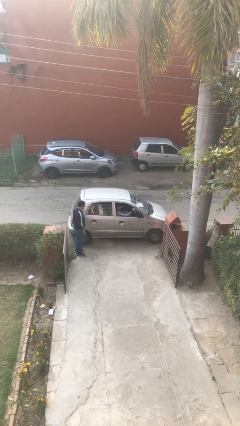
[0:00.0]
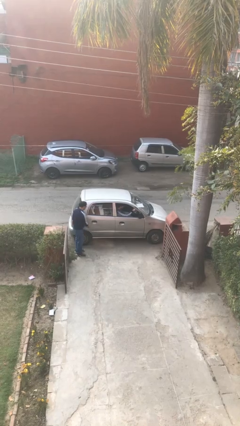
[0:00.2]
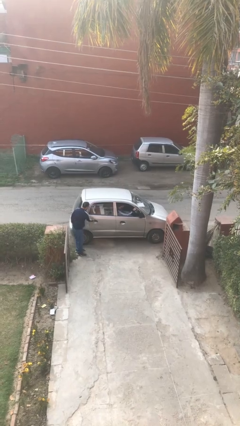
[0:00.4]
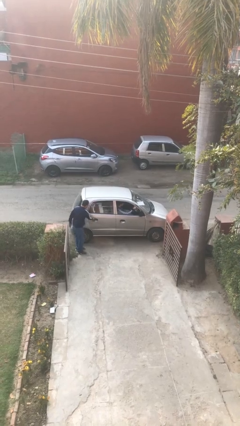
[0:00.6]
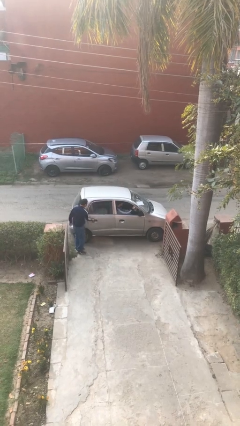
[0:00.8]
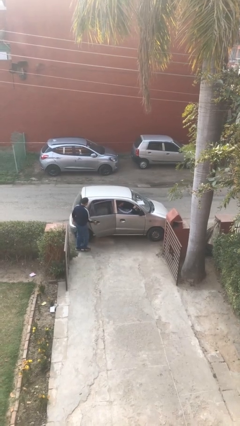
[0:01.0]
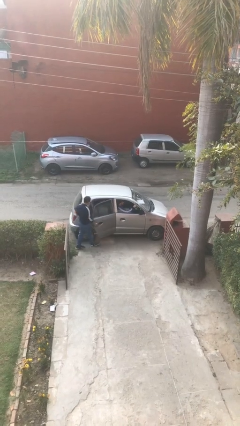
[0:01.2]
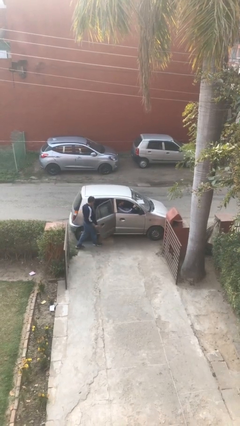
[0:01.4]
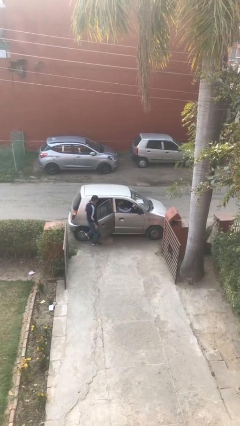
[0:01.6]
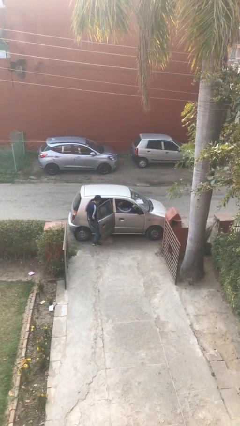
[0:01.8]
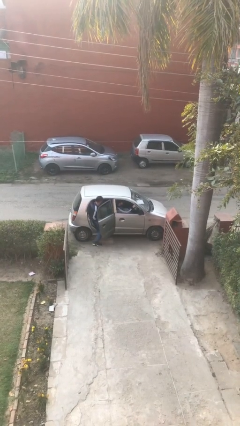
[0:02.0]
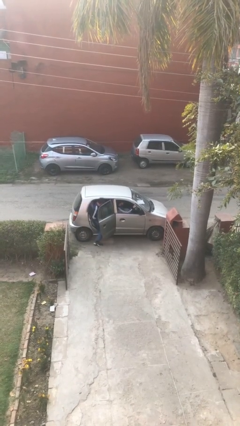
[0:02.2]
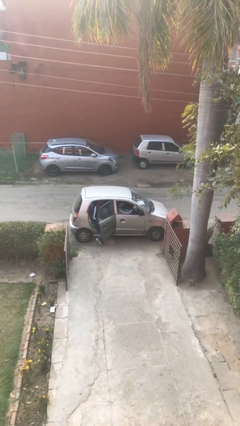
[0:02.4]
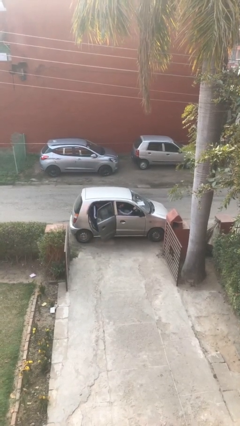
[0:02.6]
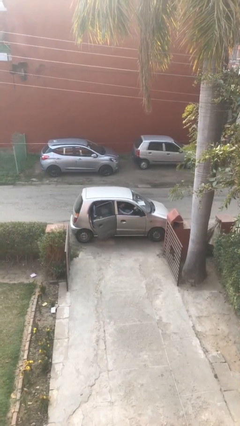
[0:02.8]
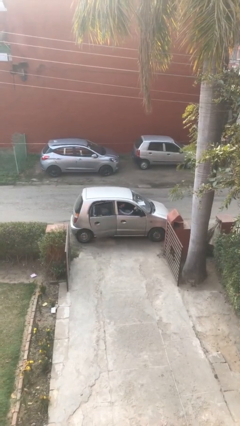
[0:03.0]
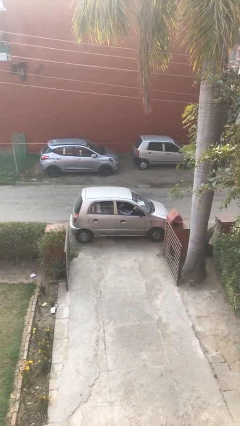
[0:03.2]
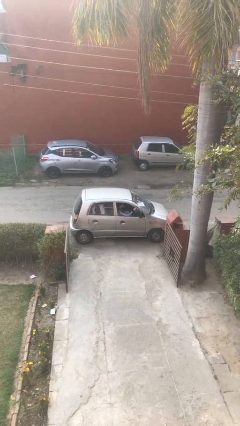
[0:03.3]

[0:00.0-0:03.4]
car picks up person

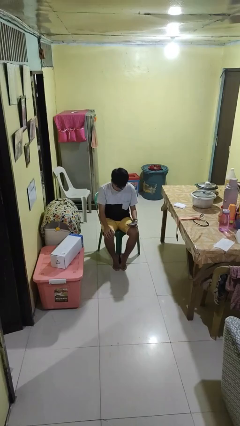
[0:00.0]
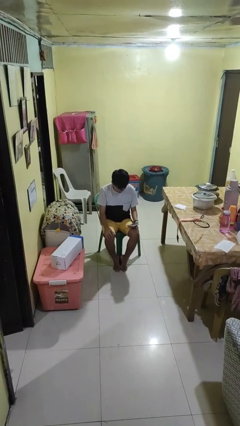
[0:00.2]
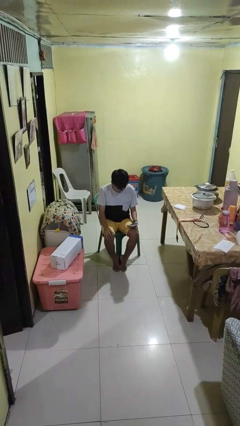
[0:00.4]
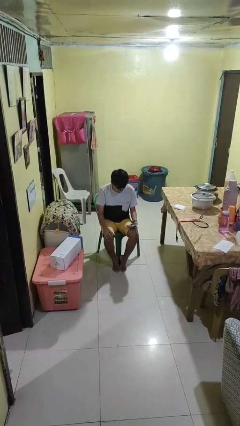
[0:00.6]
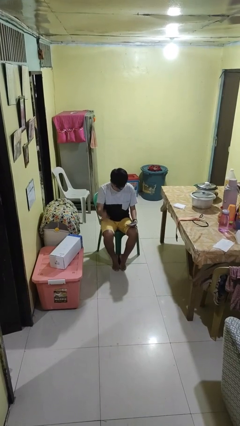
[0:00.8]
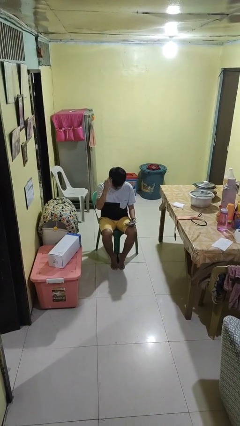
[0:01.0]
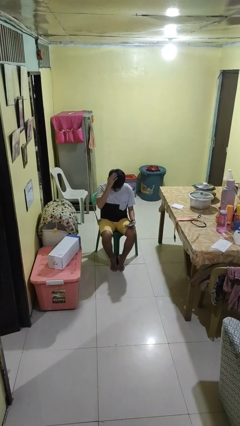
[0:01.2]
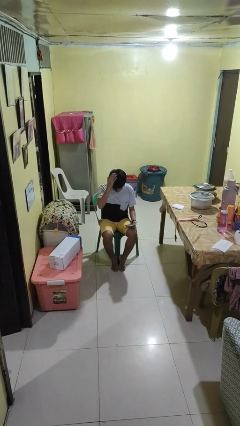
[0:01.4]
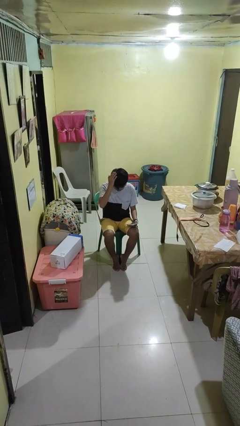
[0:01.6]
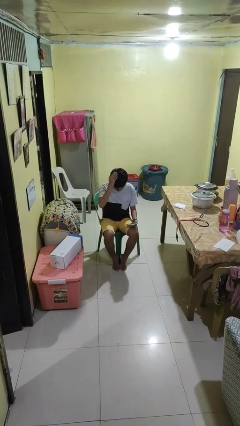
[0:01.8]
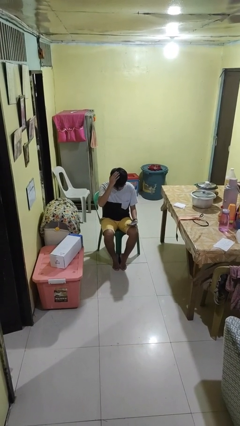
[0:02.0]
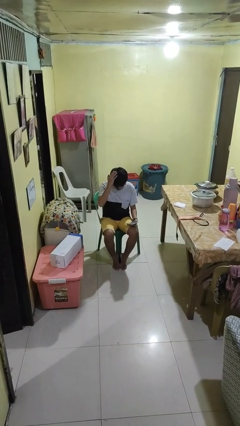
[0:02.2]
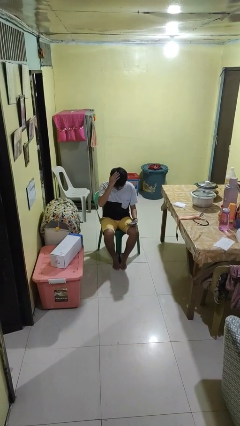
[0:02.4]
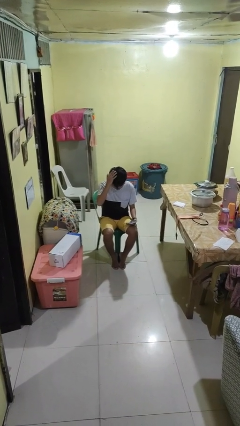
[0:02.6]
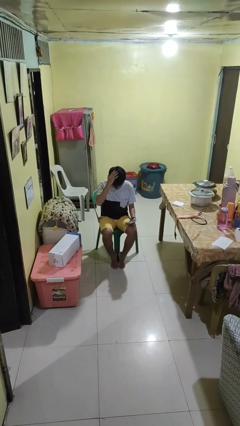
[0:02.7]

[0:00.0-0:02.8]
person pats head

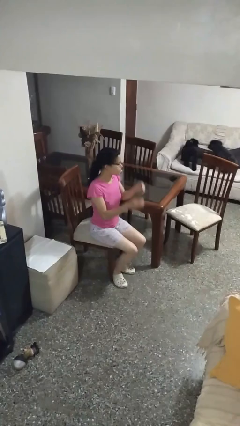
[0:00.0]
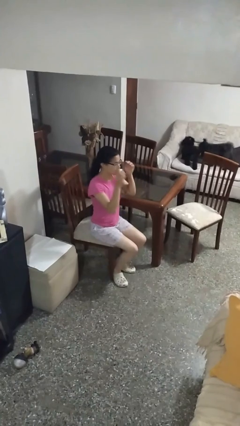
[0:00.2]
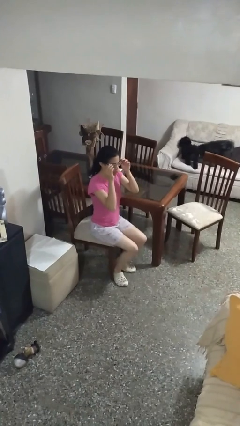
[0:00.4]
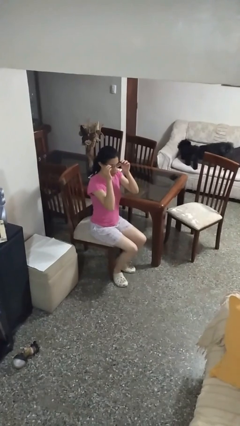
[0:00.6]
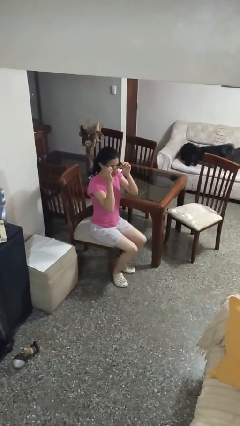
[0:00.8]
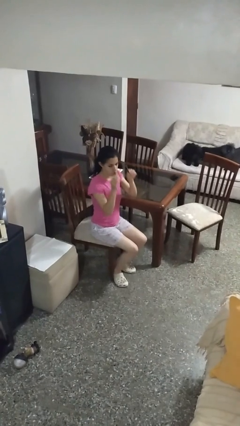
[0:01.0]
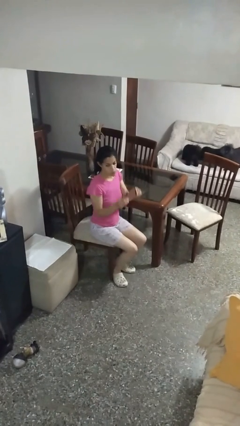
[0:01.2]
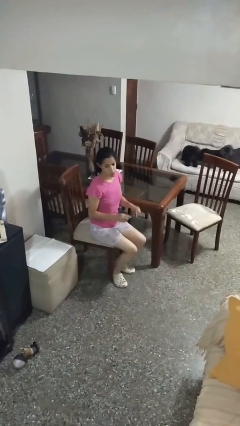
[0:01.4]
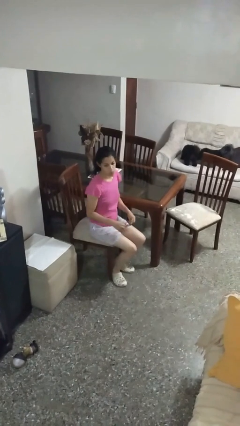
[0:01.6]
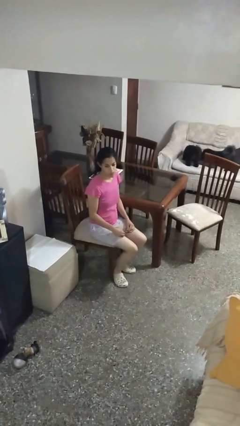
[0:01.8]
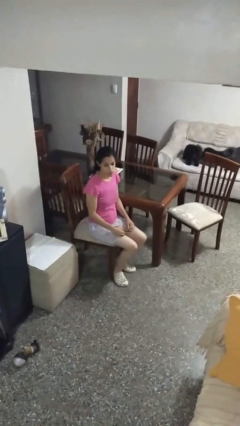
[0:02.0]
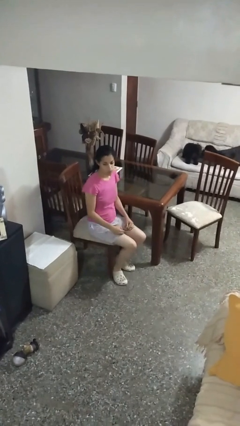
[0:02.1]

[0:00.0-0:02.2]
person takes off glasses

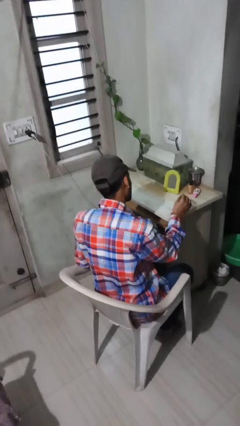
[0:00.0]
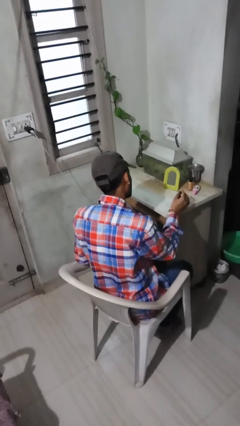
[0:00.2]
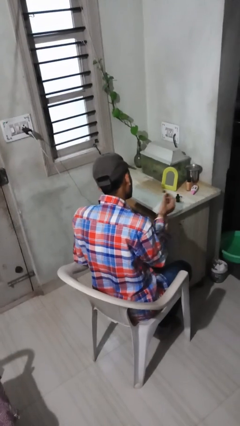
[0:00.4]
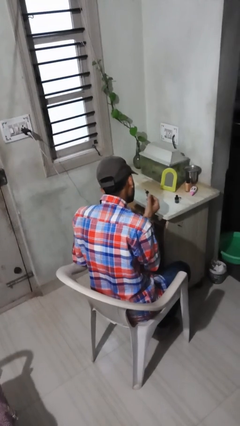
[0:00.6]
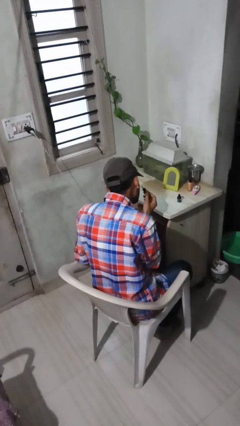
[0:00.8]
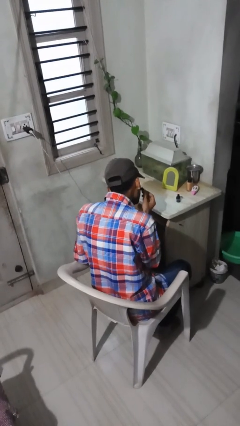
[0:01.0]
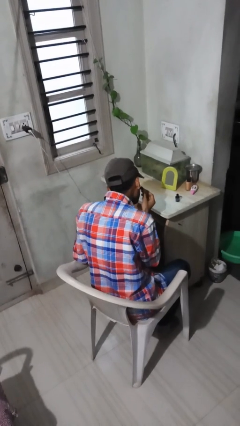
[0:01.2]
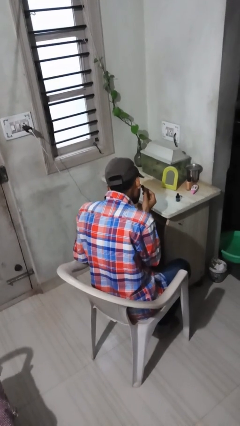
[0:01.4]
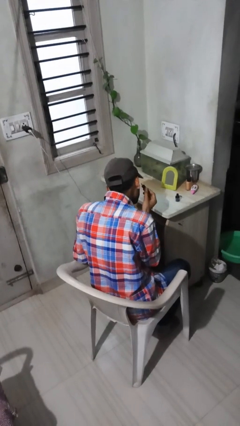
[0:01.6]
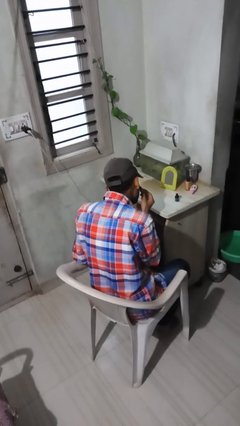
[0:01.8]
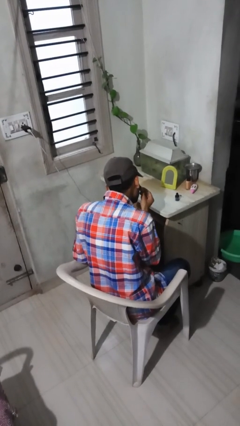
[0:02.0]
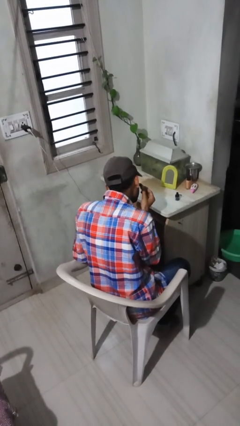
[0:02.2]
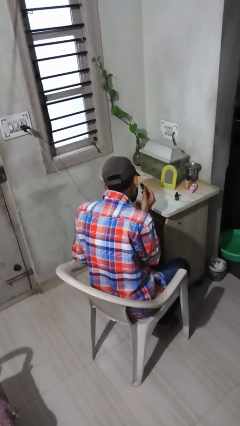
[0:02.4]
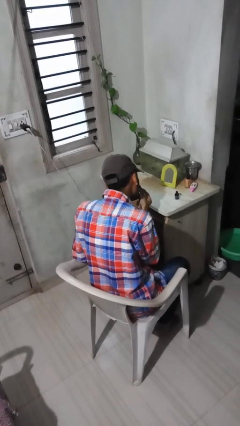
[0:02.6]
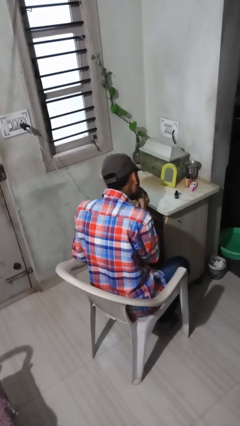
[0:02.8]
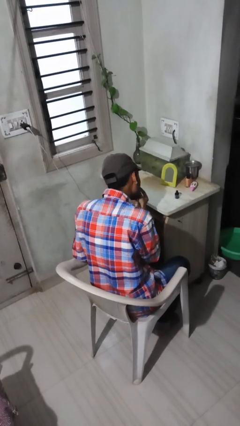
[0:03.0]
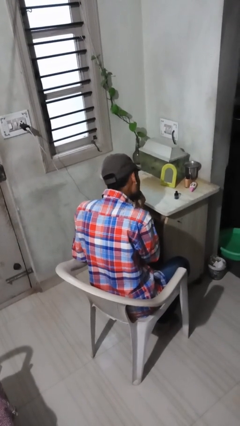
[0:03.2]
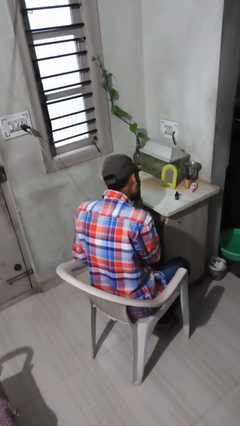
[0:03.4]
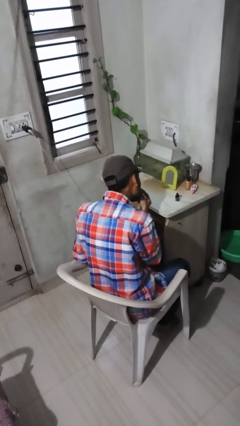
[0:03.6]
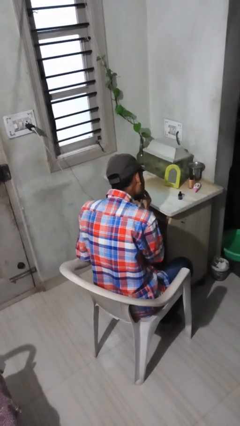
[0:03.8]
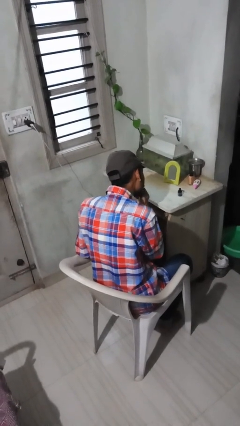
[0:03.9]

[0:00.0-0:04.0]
person applies eye makeup

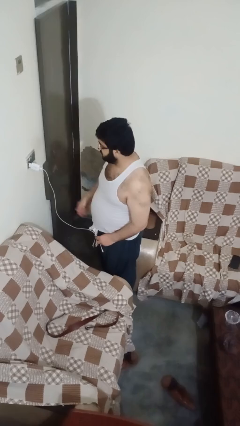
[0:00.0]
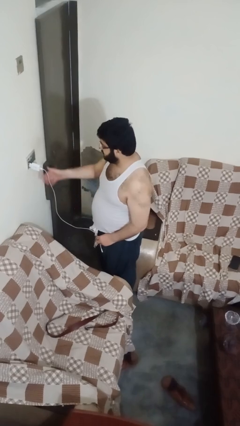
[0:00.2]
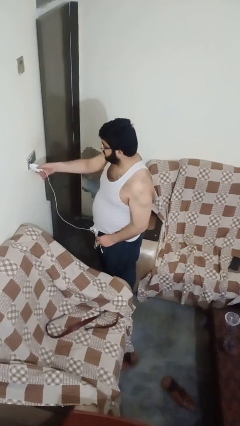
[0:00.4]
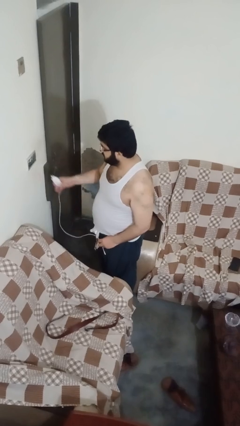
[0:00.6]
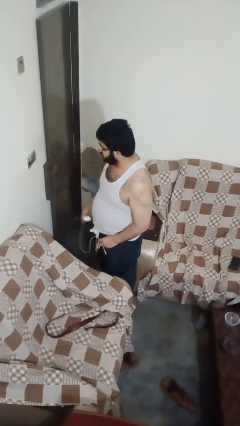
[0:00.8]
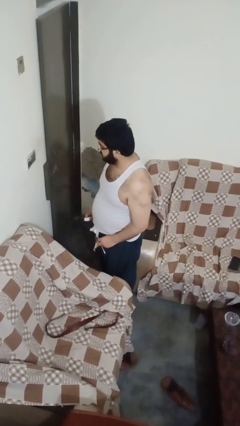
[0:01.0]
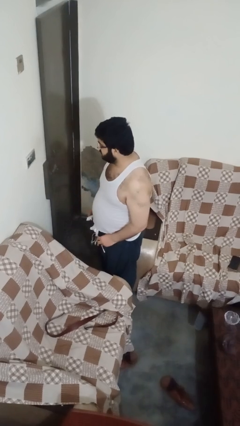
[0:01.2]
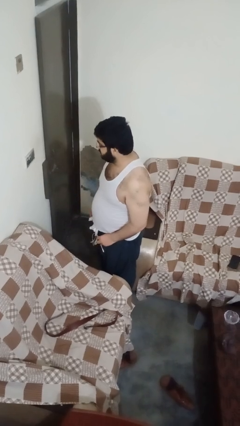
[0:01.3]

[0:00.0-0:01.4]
person unplugs from electrical socket

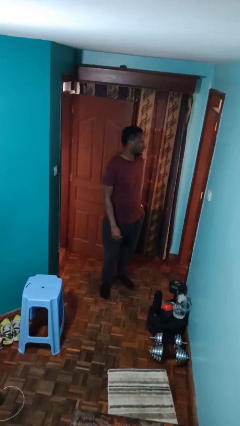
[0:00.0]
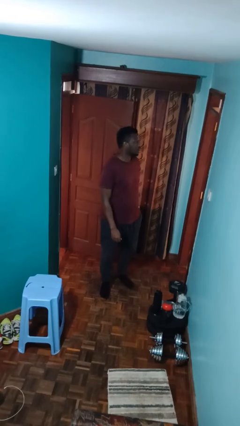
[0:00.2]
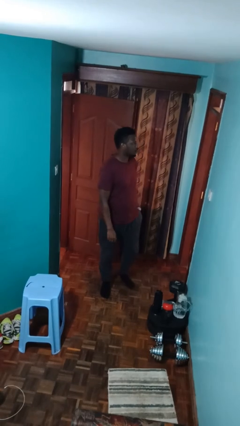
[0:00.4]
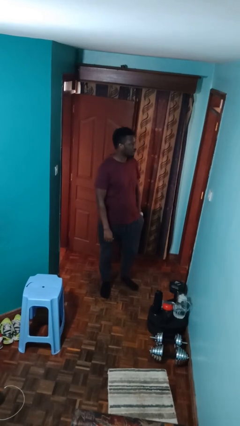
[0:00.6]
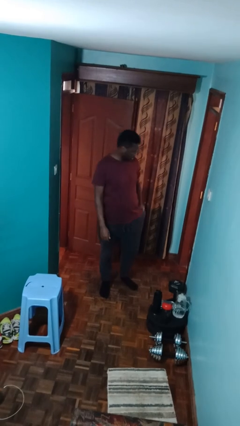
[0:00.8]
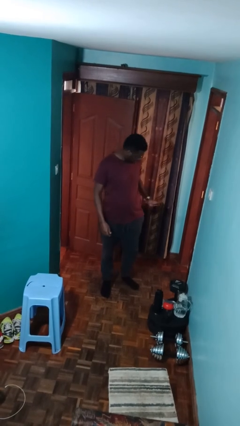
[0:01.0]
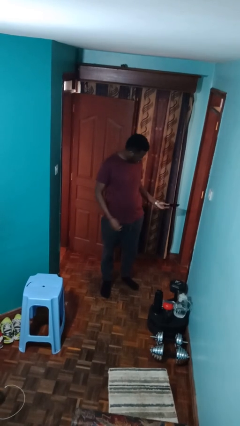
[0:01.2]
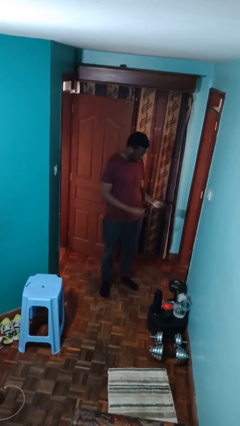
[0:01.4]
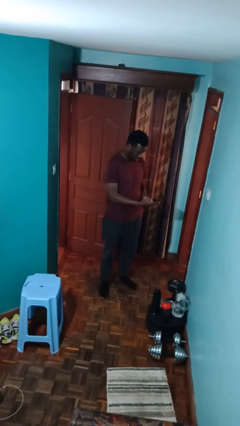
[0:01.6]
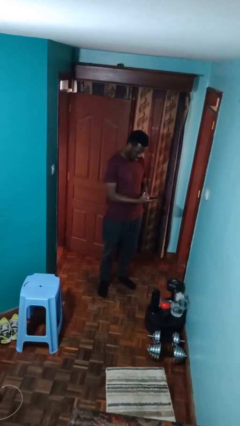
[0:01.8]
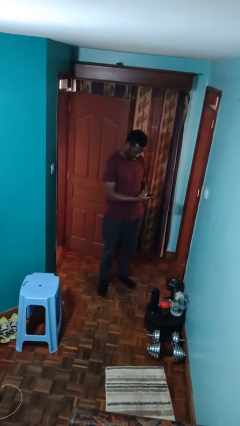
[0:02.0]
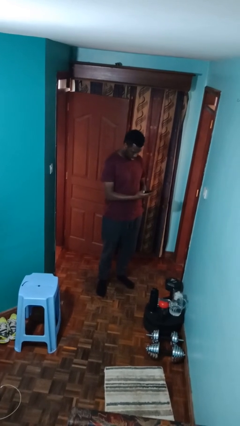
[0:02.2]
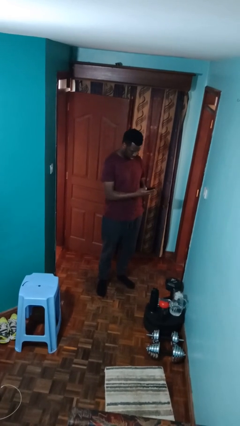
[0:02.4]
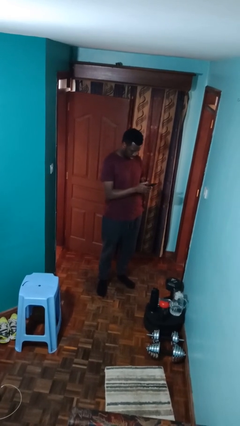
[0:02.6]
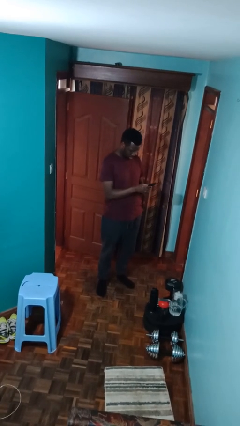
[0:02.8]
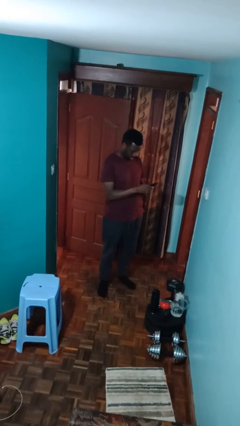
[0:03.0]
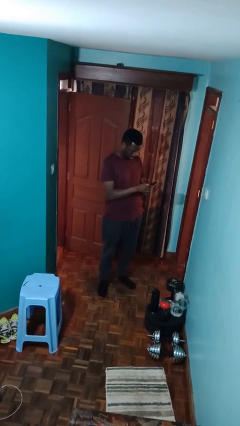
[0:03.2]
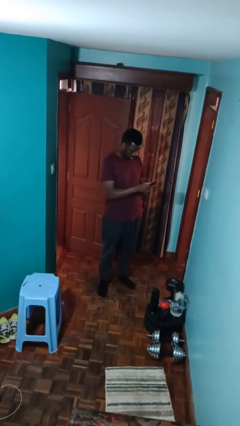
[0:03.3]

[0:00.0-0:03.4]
person takes phone from pocket
